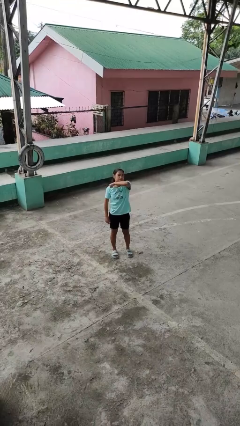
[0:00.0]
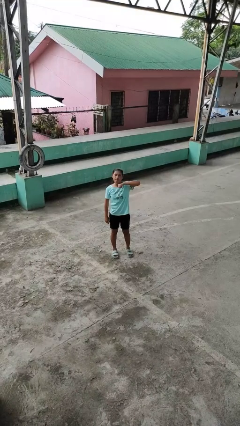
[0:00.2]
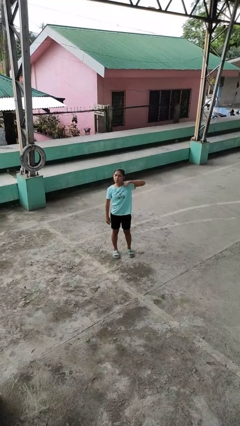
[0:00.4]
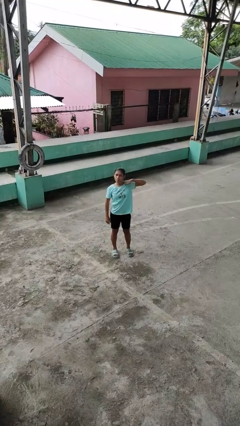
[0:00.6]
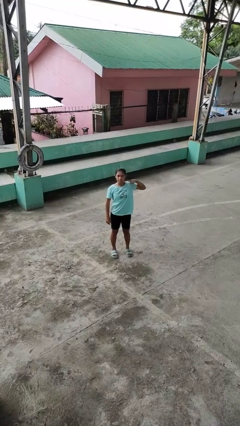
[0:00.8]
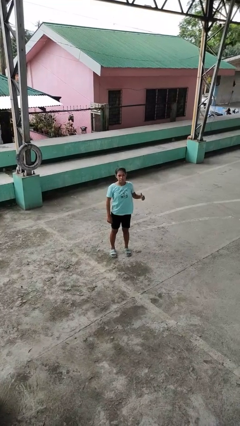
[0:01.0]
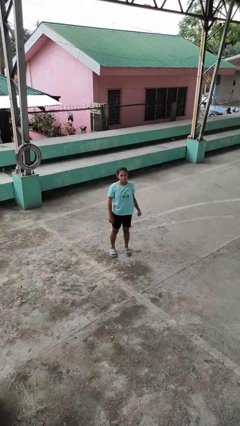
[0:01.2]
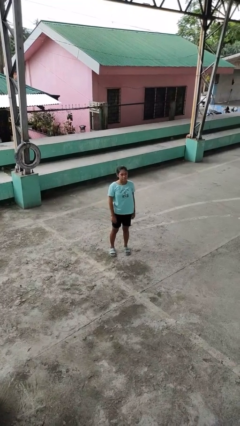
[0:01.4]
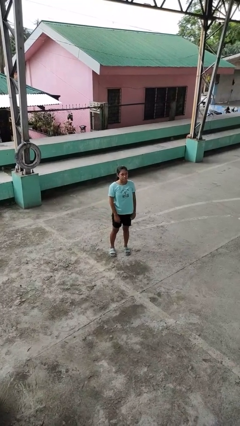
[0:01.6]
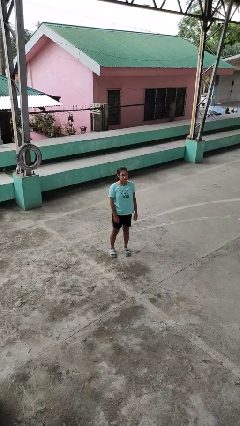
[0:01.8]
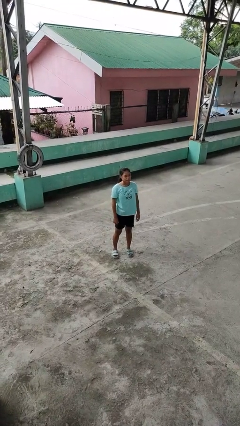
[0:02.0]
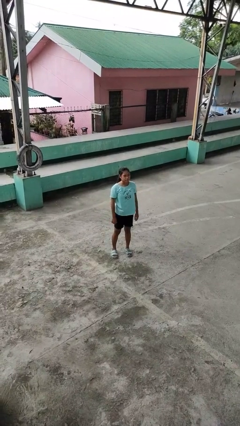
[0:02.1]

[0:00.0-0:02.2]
person gestures cut

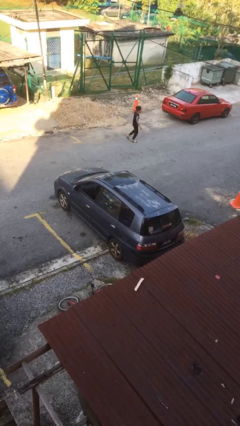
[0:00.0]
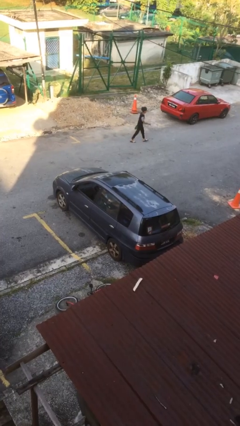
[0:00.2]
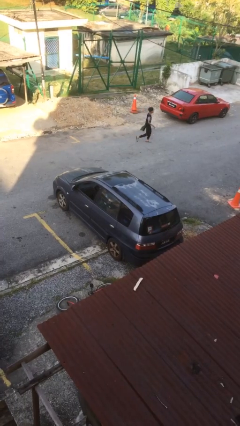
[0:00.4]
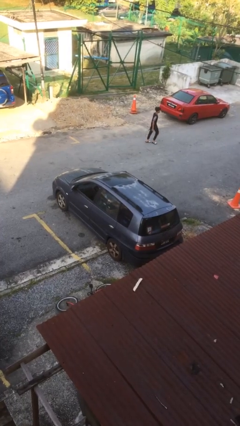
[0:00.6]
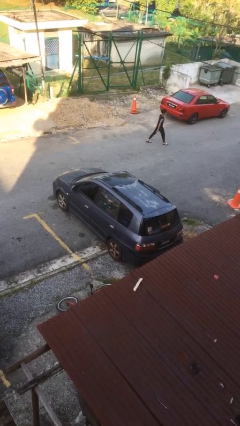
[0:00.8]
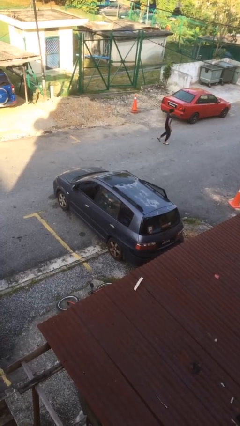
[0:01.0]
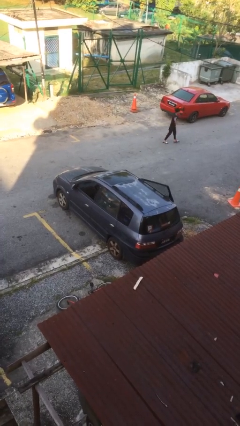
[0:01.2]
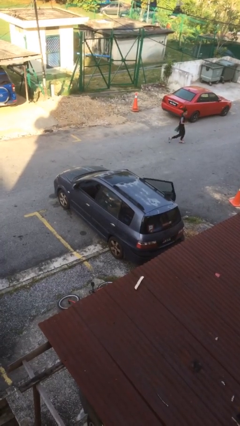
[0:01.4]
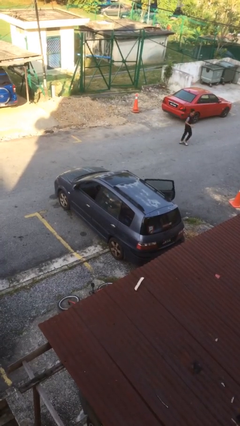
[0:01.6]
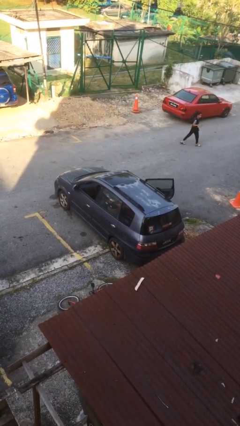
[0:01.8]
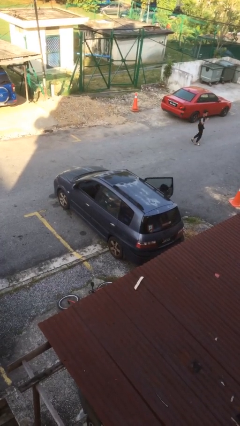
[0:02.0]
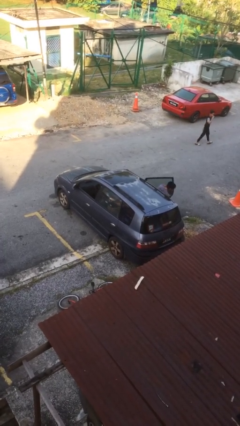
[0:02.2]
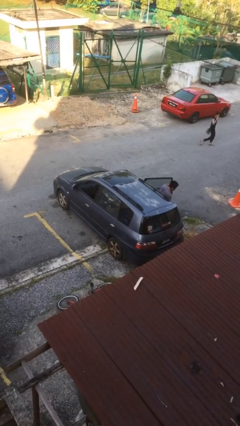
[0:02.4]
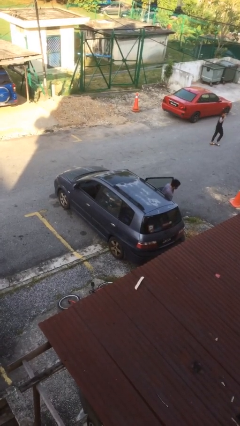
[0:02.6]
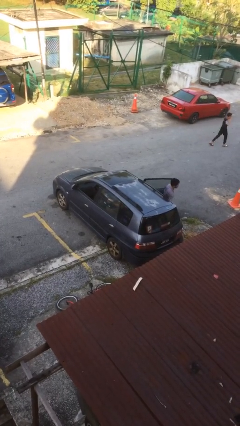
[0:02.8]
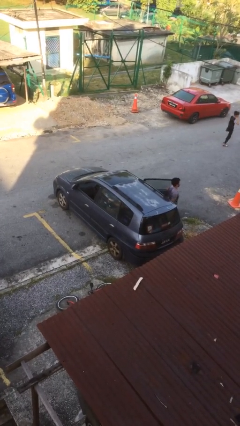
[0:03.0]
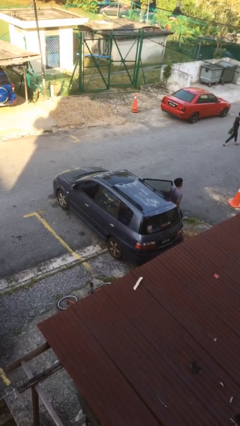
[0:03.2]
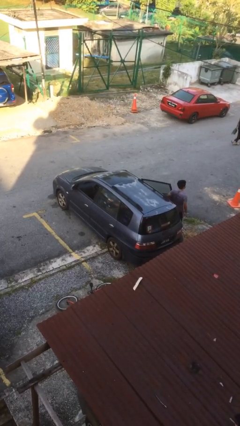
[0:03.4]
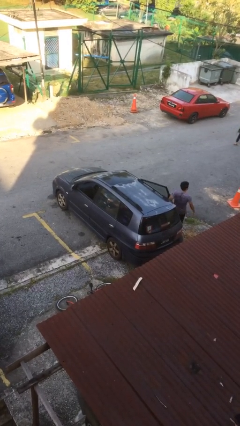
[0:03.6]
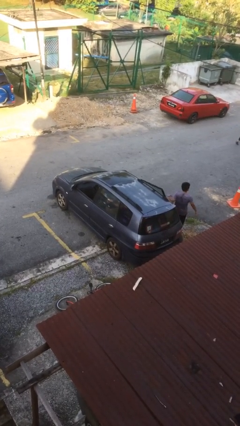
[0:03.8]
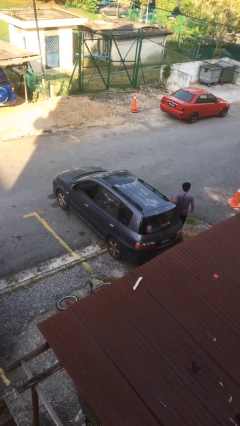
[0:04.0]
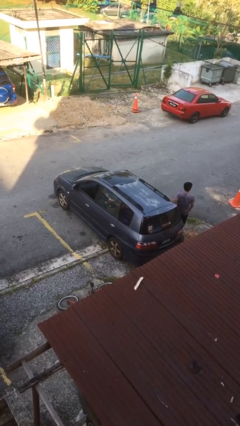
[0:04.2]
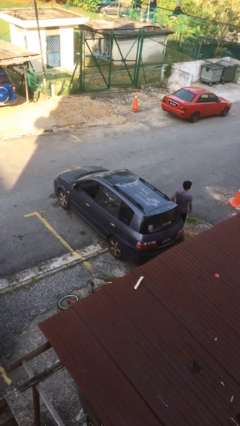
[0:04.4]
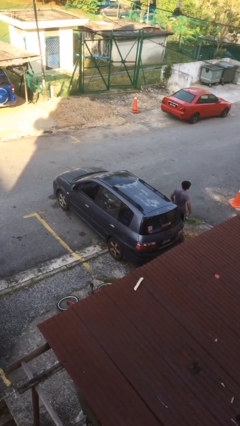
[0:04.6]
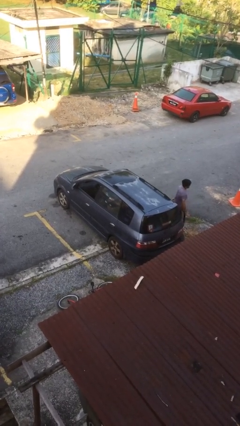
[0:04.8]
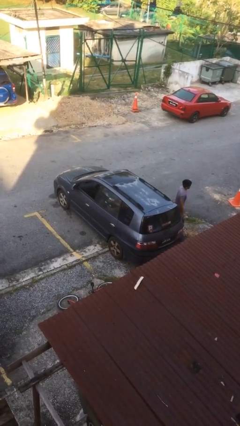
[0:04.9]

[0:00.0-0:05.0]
car drops off person

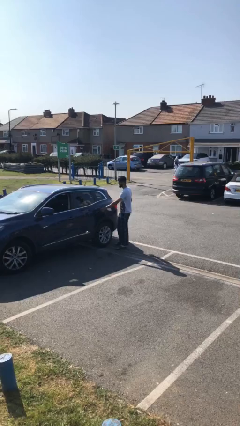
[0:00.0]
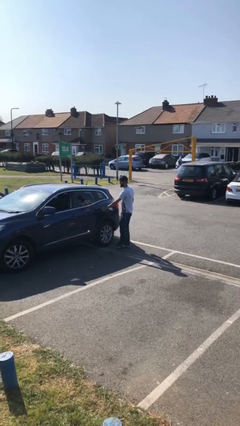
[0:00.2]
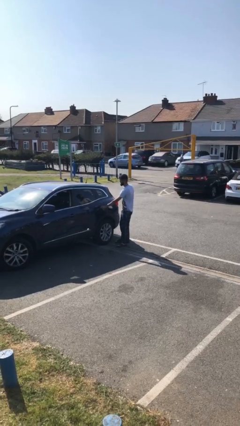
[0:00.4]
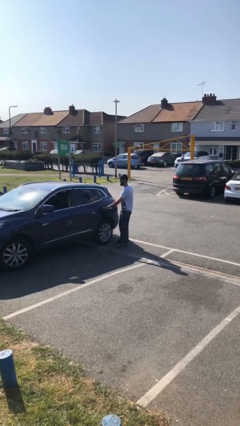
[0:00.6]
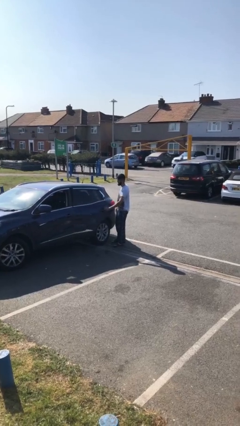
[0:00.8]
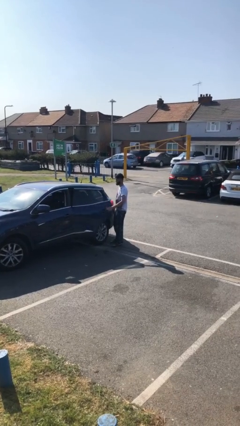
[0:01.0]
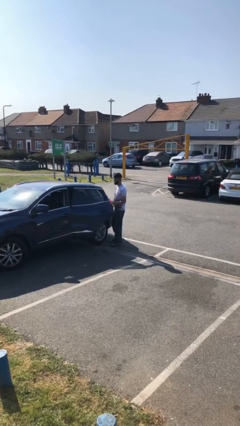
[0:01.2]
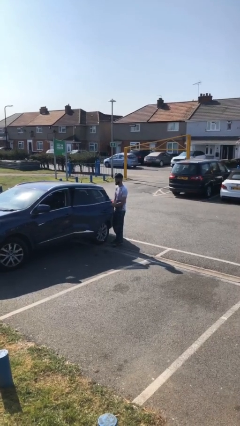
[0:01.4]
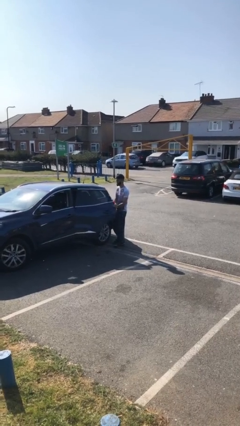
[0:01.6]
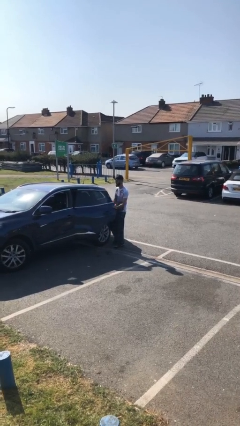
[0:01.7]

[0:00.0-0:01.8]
person opens car door

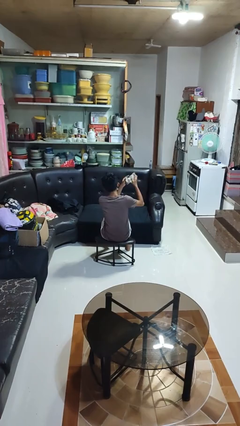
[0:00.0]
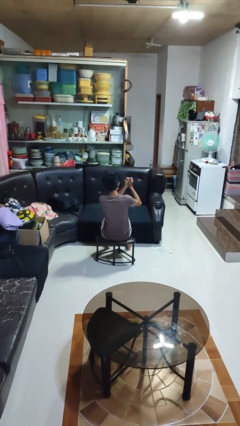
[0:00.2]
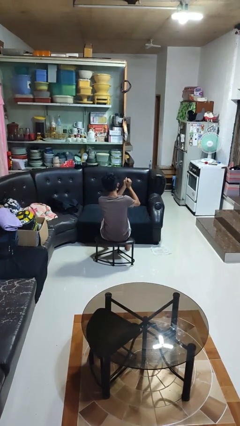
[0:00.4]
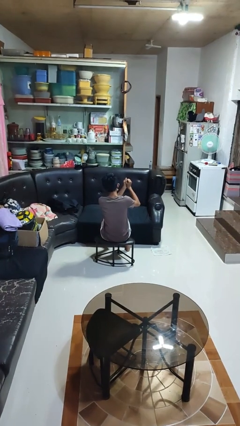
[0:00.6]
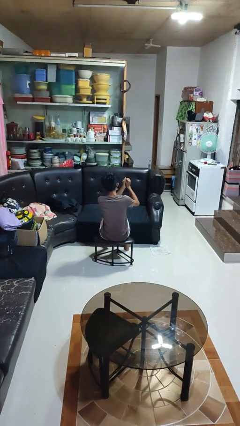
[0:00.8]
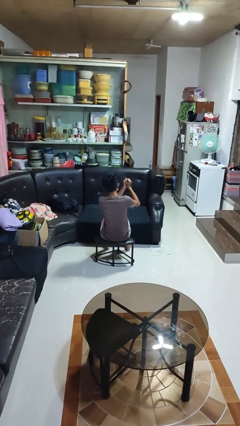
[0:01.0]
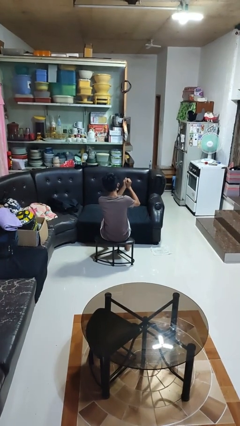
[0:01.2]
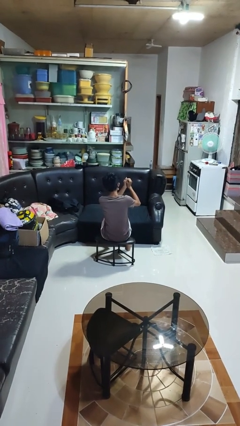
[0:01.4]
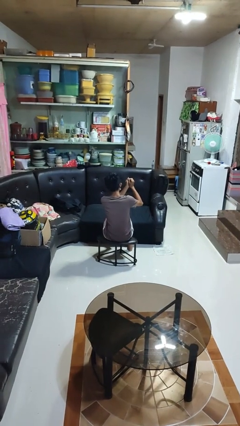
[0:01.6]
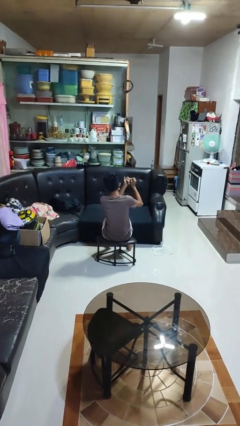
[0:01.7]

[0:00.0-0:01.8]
person crumples paper

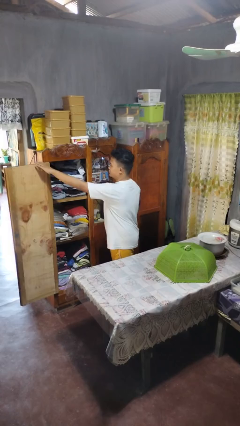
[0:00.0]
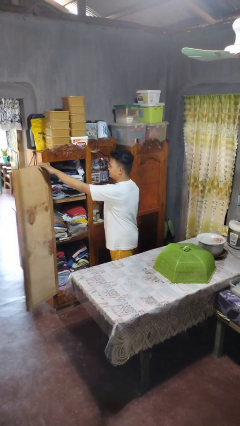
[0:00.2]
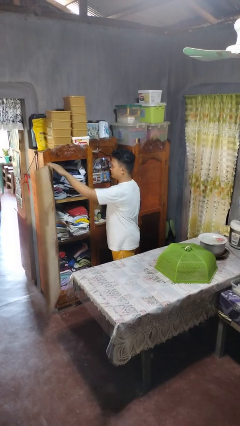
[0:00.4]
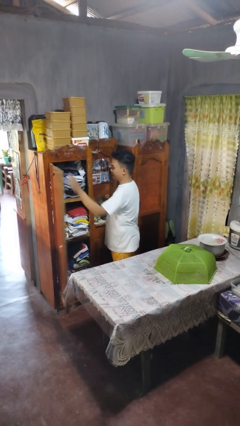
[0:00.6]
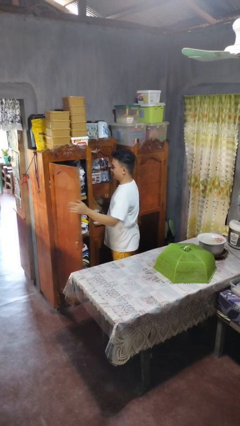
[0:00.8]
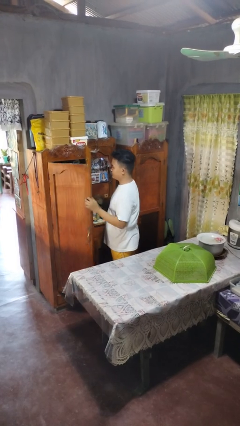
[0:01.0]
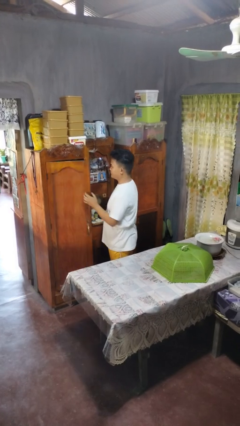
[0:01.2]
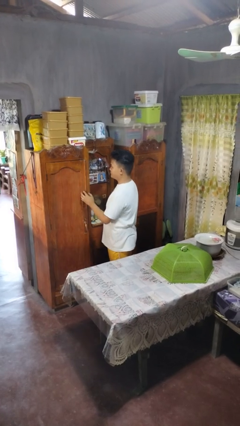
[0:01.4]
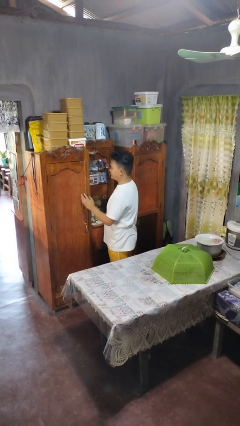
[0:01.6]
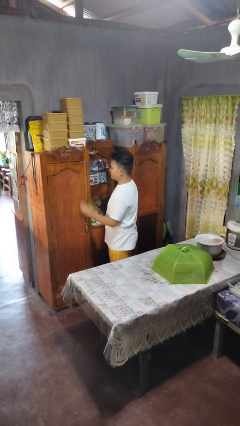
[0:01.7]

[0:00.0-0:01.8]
person closes closet door

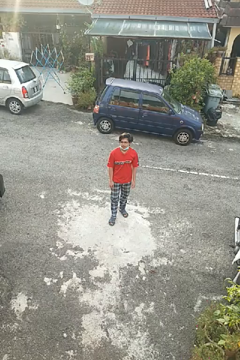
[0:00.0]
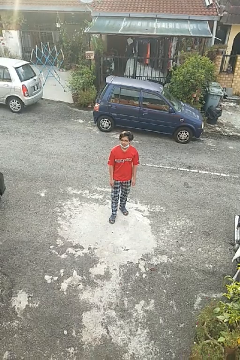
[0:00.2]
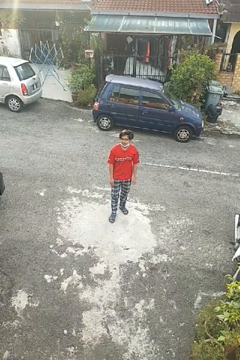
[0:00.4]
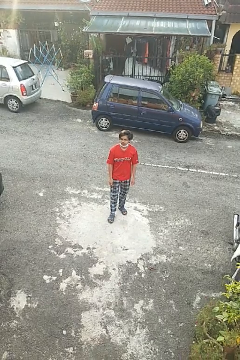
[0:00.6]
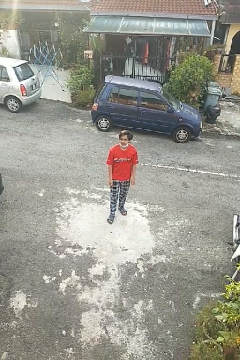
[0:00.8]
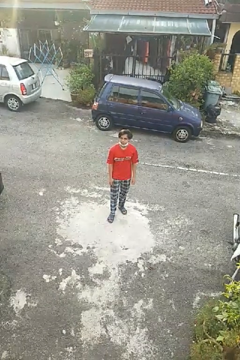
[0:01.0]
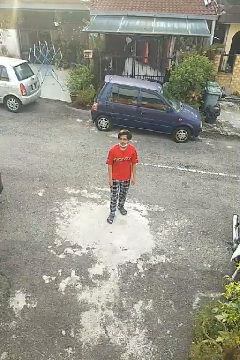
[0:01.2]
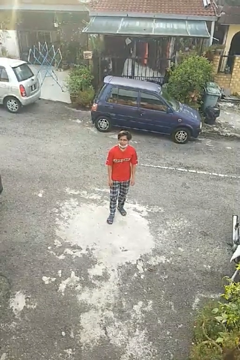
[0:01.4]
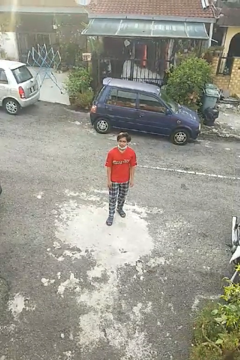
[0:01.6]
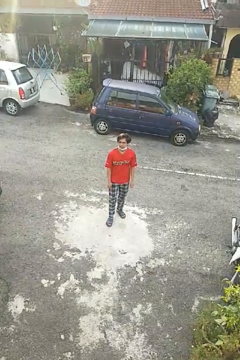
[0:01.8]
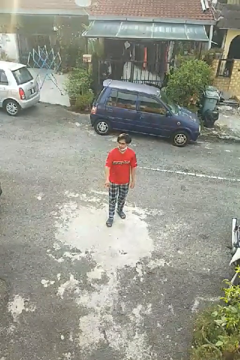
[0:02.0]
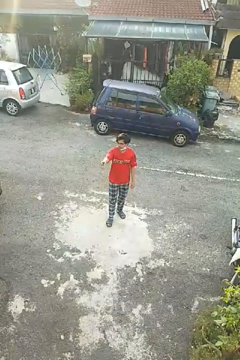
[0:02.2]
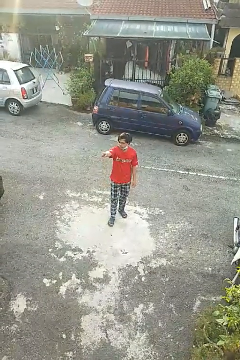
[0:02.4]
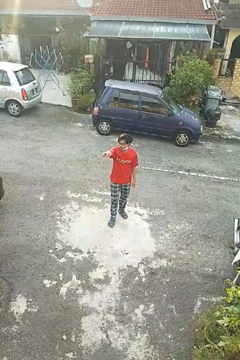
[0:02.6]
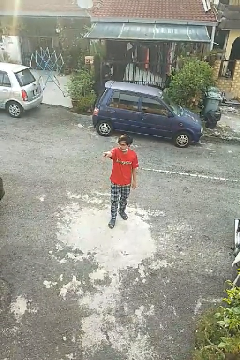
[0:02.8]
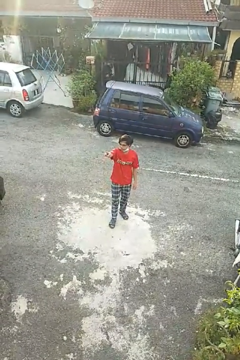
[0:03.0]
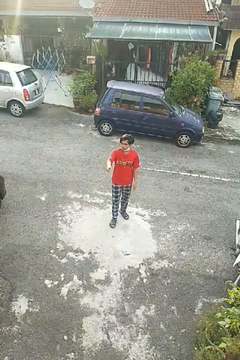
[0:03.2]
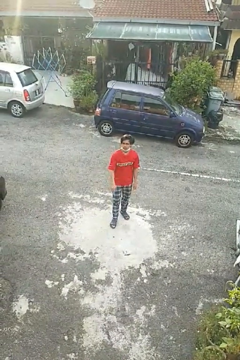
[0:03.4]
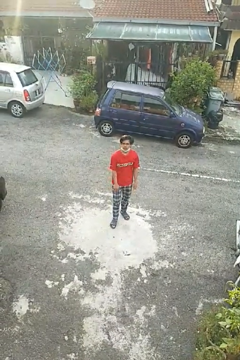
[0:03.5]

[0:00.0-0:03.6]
person points at person

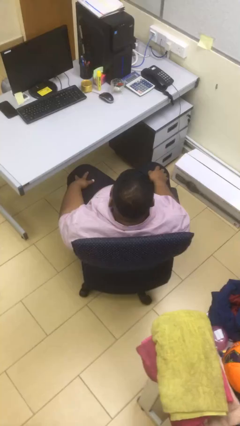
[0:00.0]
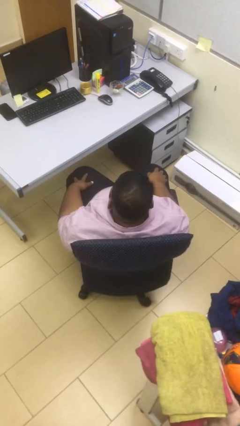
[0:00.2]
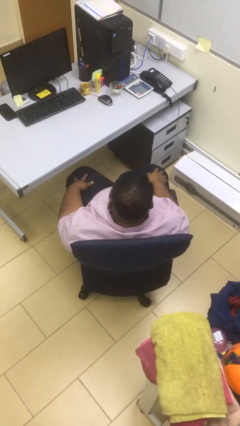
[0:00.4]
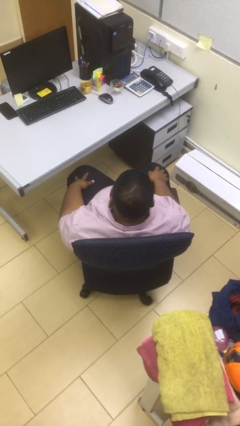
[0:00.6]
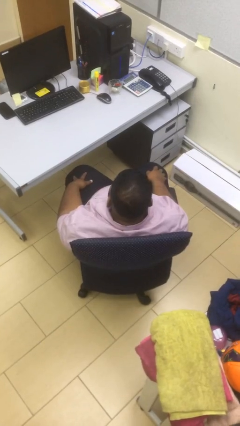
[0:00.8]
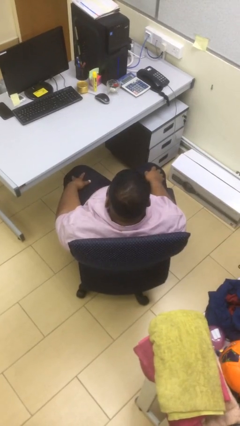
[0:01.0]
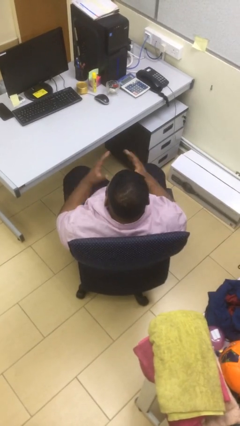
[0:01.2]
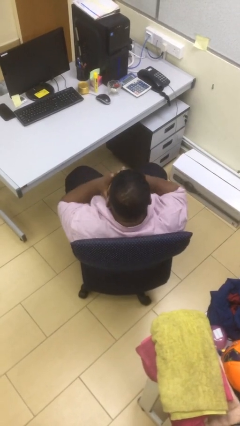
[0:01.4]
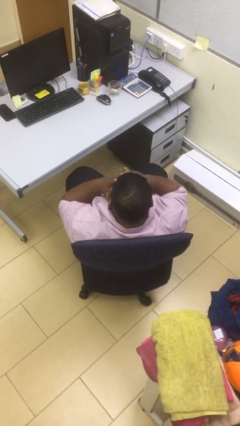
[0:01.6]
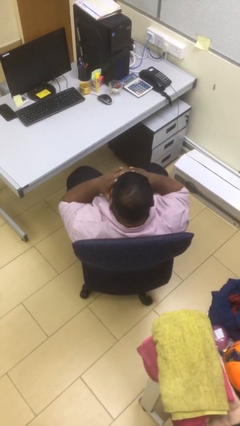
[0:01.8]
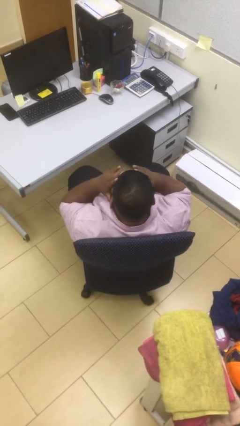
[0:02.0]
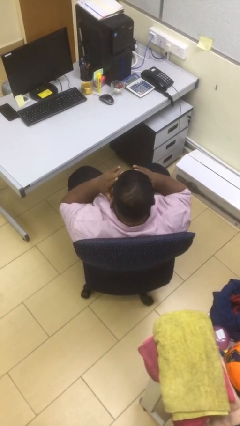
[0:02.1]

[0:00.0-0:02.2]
person covers face with hands
